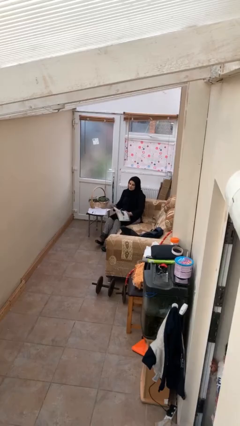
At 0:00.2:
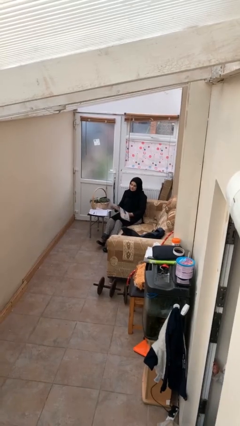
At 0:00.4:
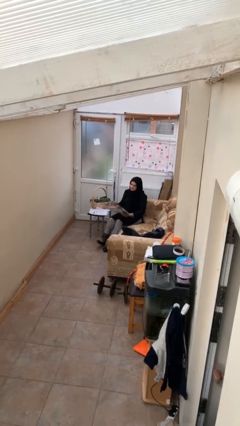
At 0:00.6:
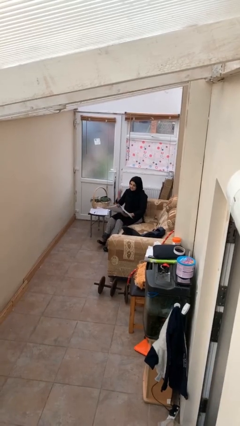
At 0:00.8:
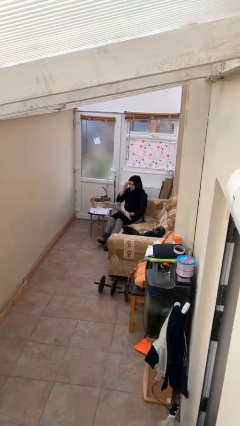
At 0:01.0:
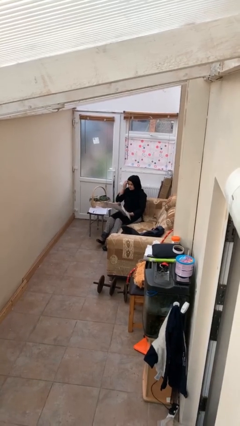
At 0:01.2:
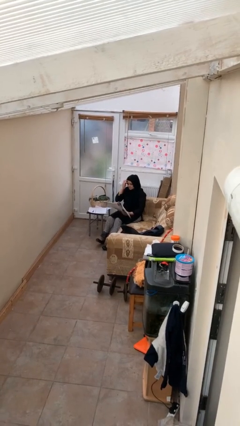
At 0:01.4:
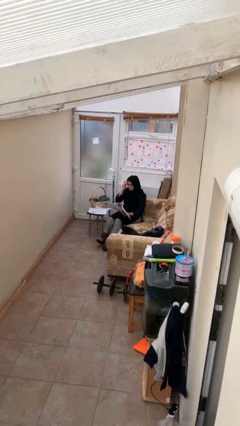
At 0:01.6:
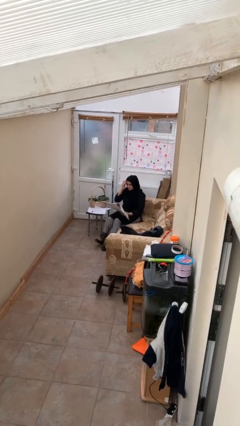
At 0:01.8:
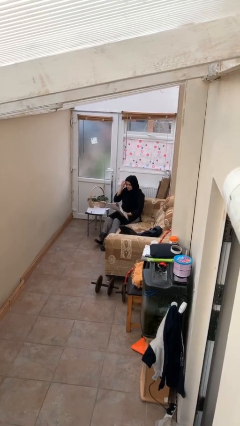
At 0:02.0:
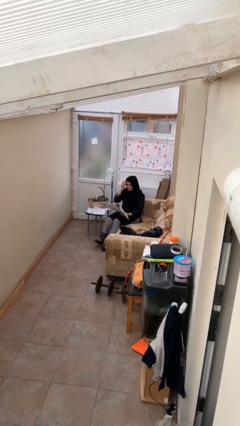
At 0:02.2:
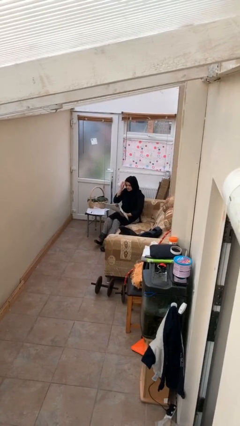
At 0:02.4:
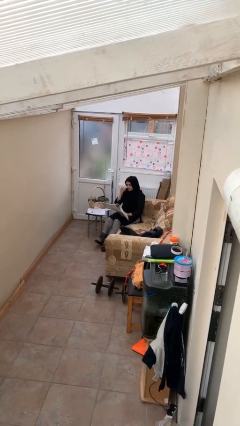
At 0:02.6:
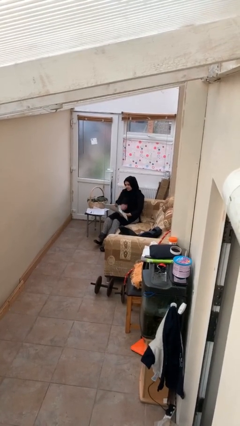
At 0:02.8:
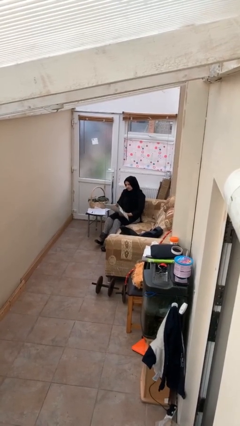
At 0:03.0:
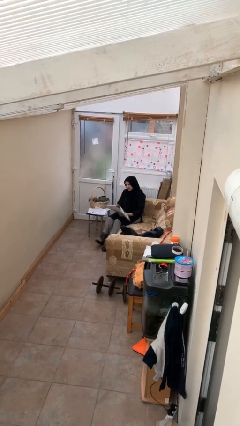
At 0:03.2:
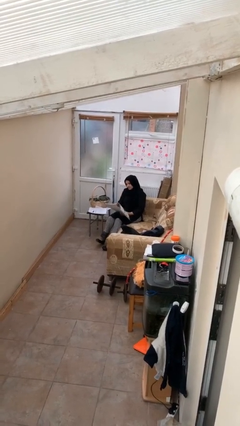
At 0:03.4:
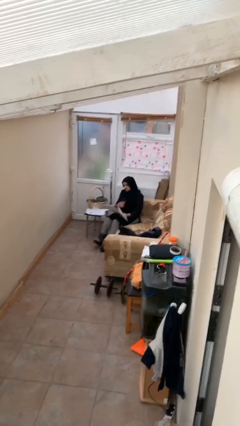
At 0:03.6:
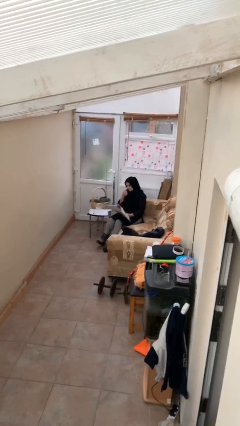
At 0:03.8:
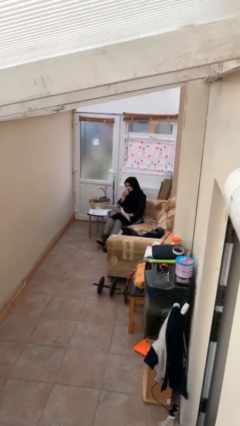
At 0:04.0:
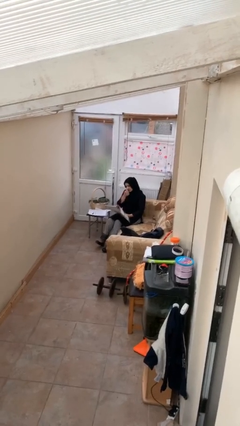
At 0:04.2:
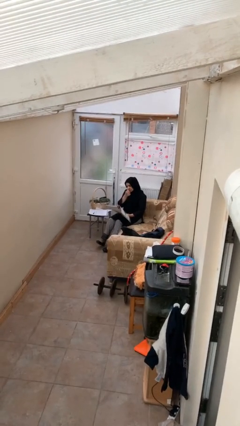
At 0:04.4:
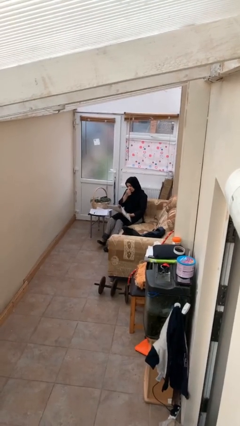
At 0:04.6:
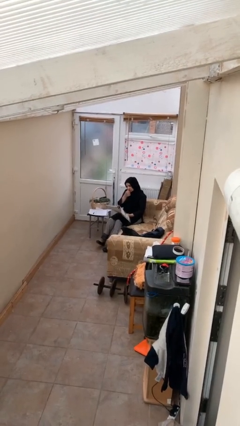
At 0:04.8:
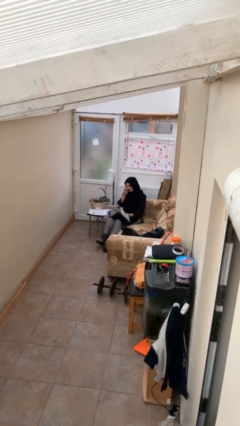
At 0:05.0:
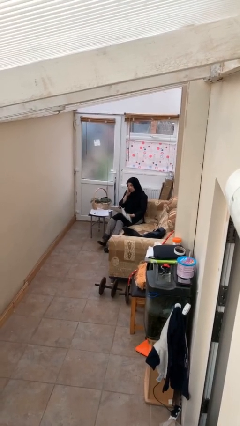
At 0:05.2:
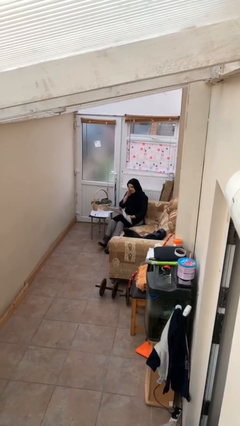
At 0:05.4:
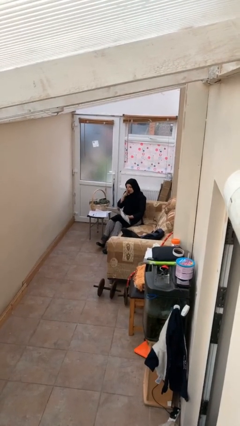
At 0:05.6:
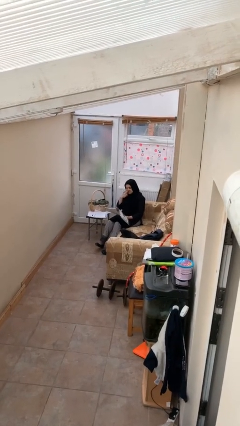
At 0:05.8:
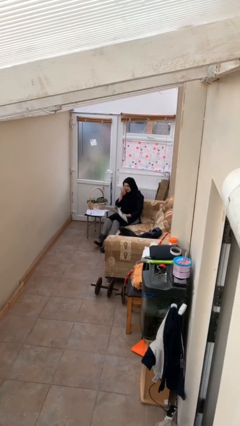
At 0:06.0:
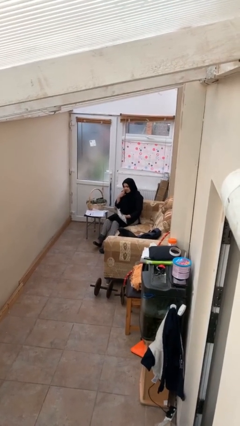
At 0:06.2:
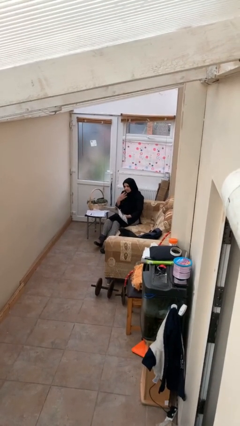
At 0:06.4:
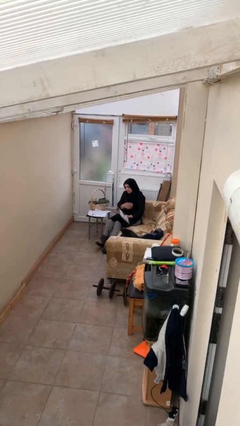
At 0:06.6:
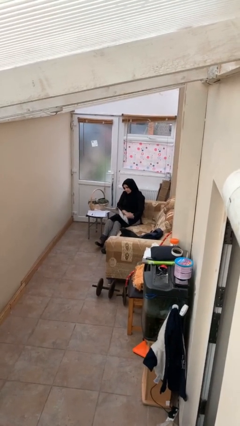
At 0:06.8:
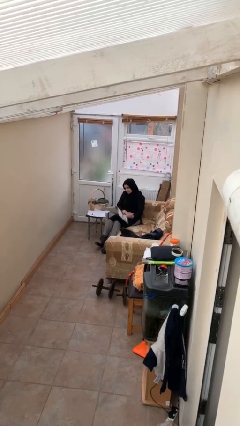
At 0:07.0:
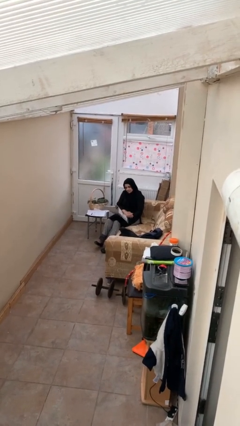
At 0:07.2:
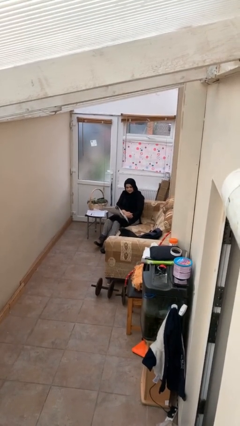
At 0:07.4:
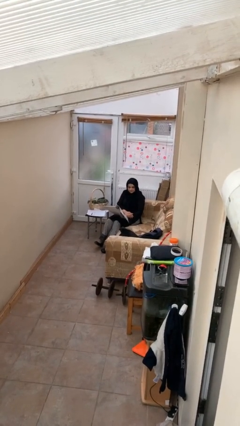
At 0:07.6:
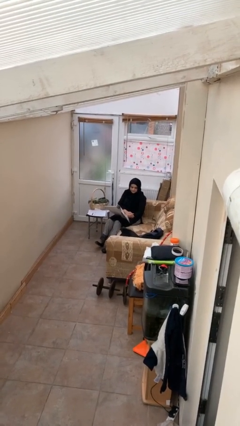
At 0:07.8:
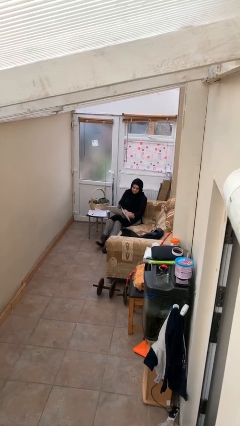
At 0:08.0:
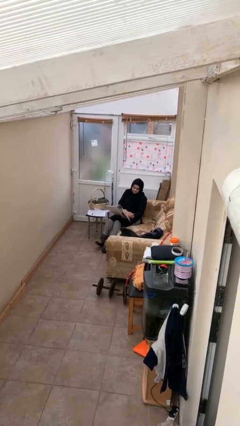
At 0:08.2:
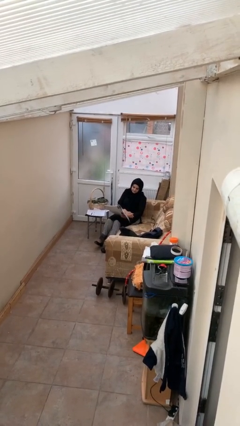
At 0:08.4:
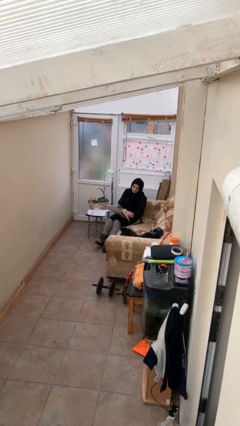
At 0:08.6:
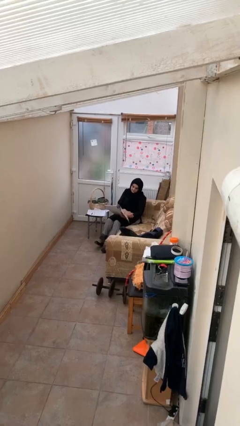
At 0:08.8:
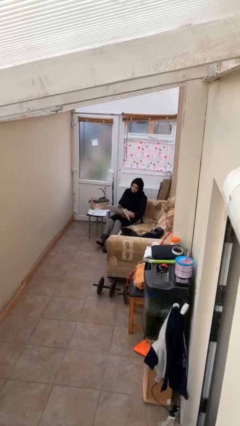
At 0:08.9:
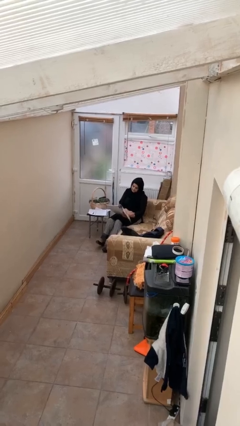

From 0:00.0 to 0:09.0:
person reads document

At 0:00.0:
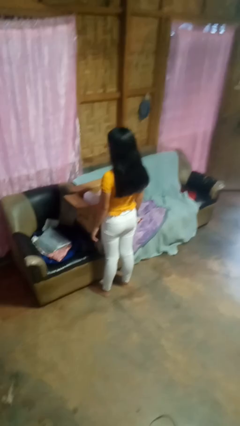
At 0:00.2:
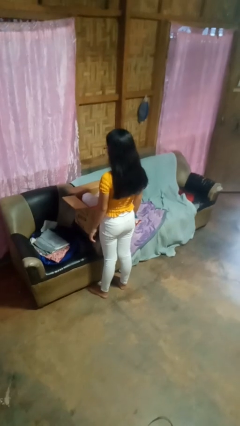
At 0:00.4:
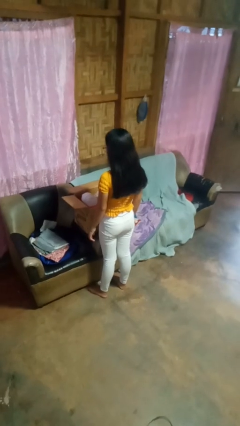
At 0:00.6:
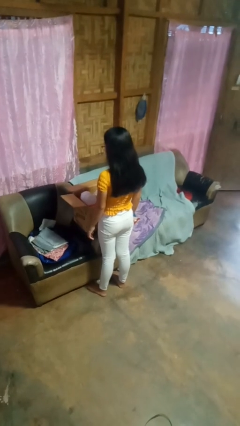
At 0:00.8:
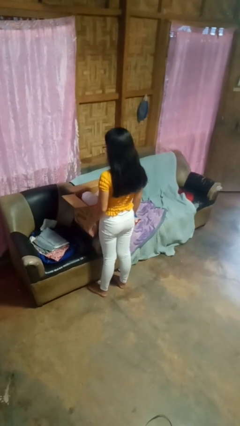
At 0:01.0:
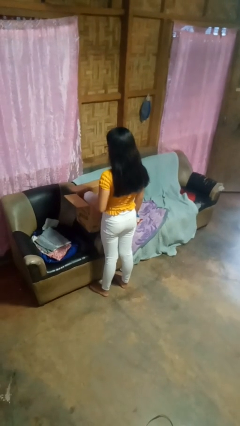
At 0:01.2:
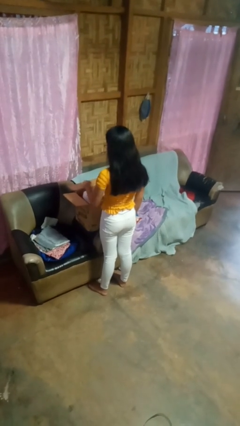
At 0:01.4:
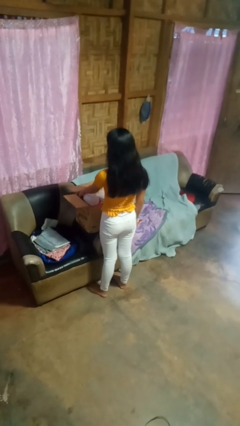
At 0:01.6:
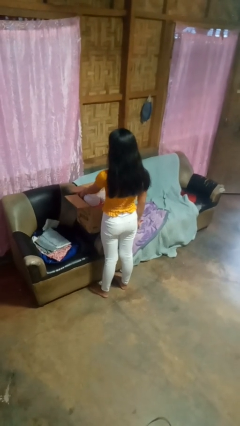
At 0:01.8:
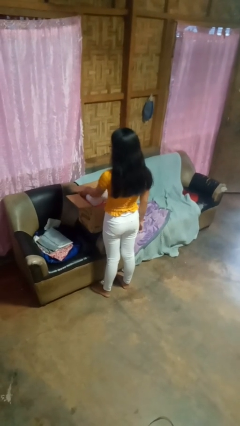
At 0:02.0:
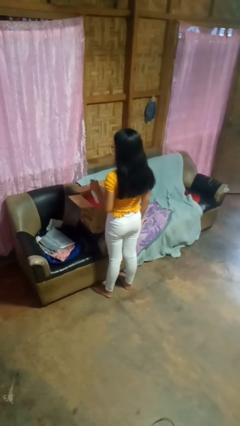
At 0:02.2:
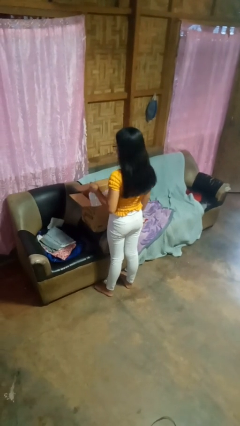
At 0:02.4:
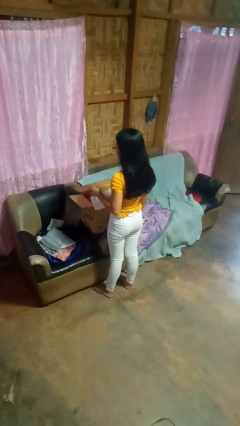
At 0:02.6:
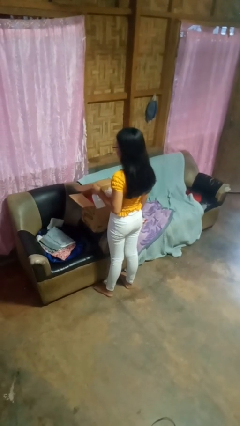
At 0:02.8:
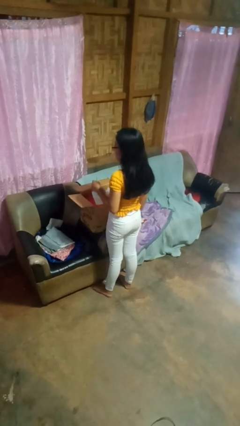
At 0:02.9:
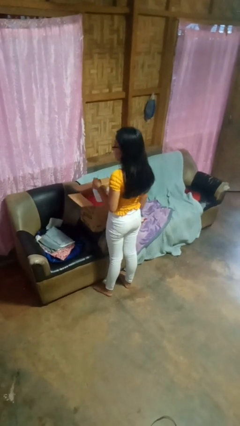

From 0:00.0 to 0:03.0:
person takes object from box

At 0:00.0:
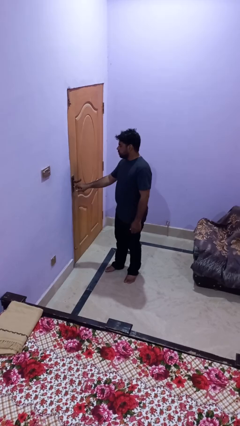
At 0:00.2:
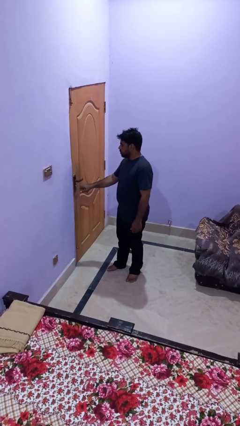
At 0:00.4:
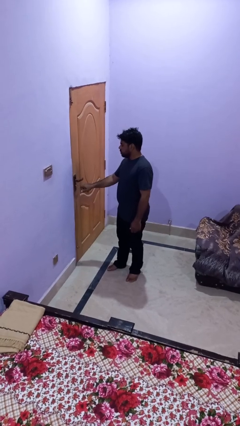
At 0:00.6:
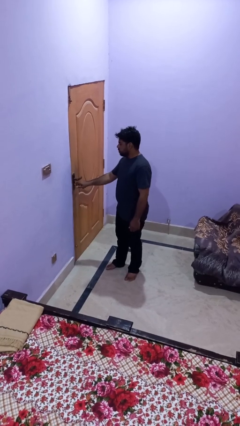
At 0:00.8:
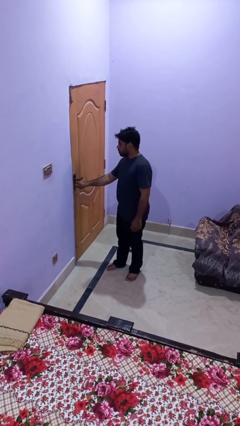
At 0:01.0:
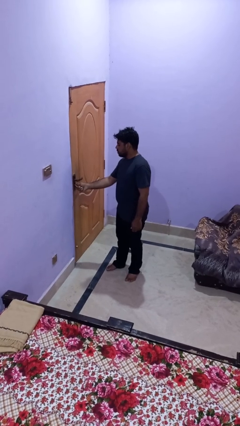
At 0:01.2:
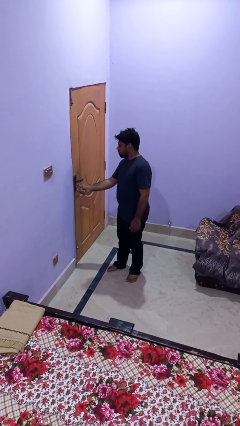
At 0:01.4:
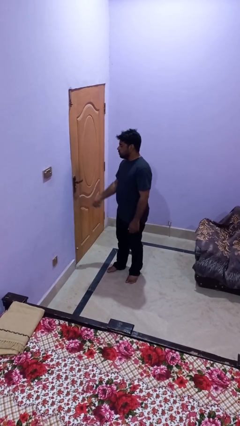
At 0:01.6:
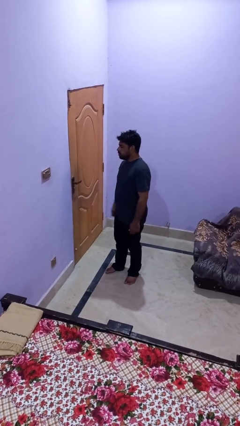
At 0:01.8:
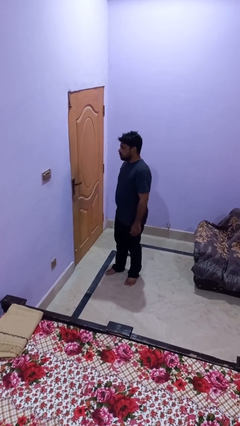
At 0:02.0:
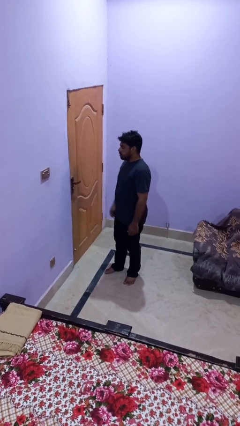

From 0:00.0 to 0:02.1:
person unlocks door with keys

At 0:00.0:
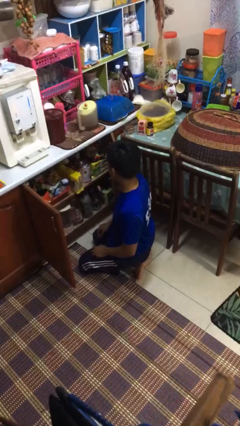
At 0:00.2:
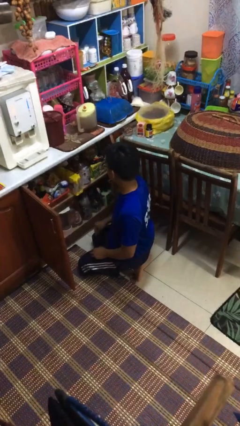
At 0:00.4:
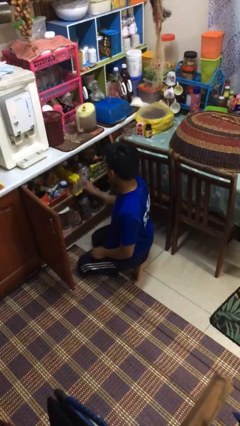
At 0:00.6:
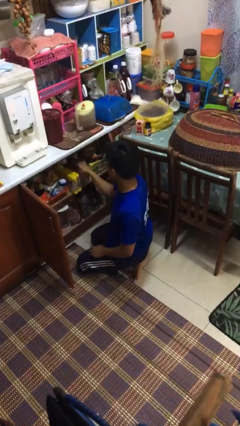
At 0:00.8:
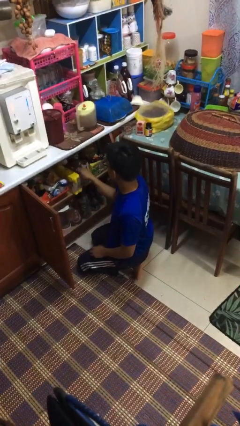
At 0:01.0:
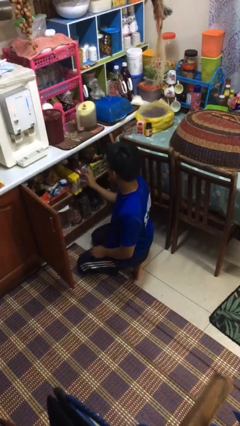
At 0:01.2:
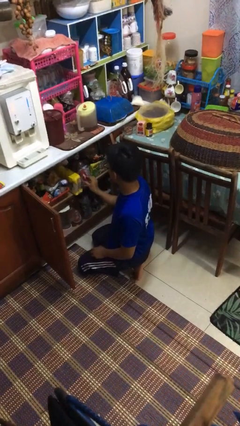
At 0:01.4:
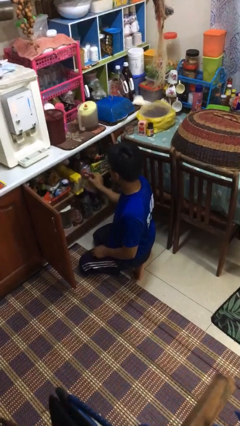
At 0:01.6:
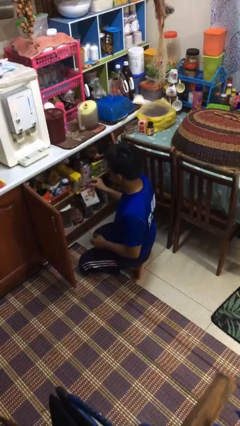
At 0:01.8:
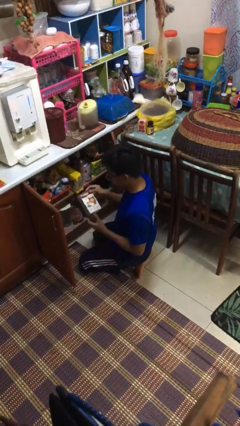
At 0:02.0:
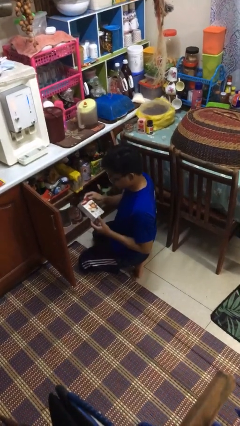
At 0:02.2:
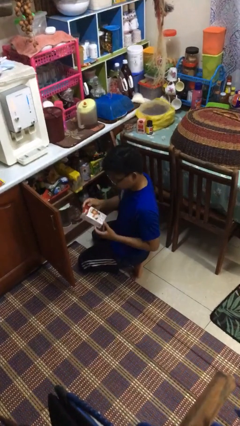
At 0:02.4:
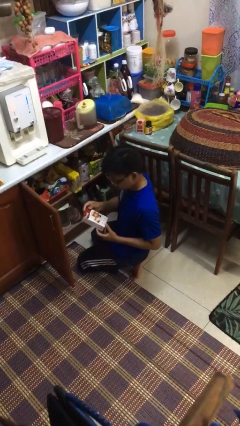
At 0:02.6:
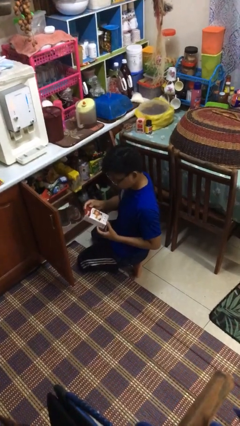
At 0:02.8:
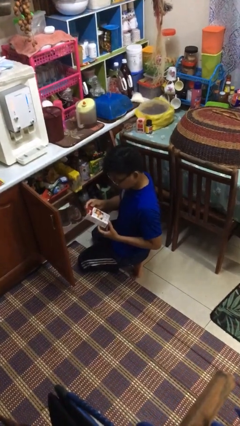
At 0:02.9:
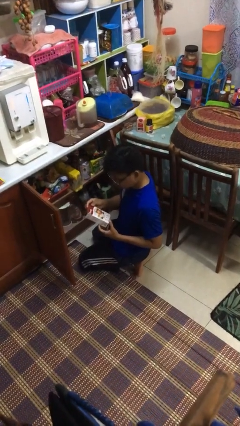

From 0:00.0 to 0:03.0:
person takes object from cabinet

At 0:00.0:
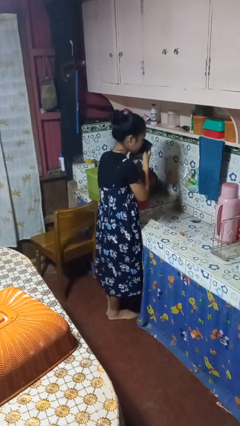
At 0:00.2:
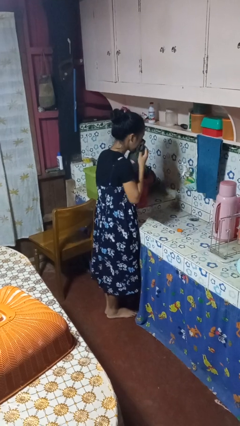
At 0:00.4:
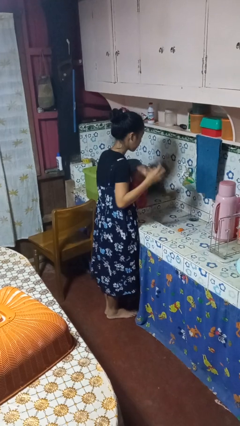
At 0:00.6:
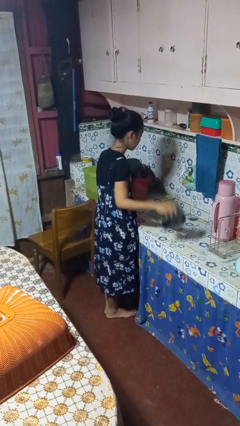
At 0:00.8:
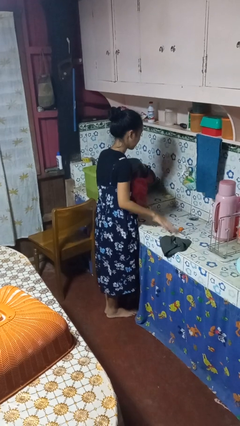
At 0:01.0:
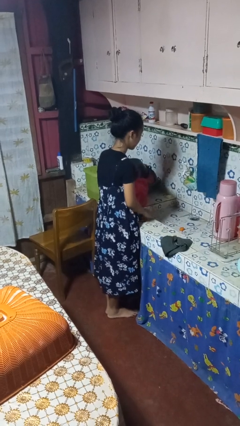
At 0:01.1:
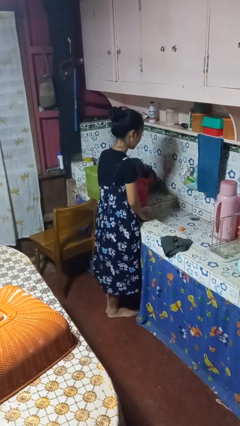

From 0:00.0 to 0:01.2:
person dries face with towel
